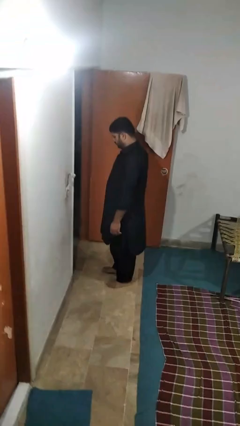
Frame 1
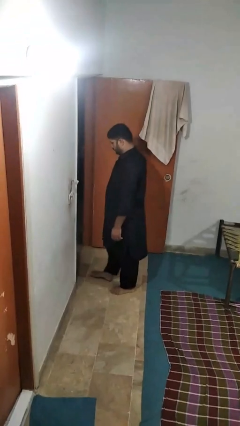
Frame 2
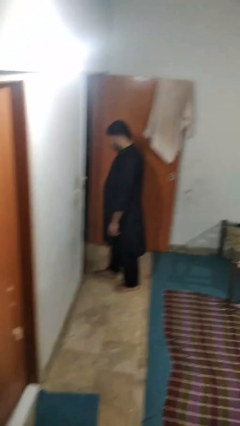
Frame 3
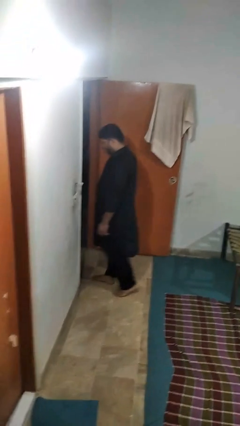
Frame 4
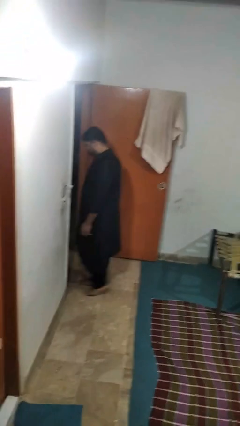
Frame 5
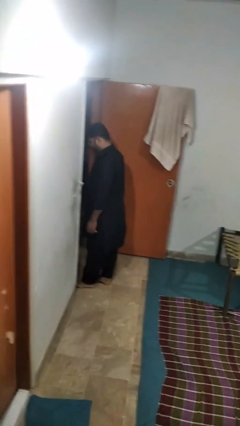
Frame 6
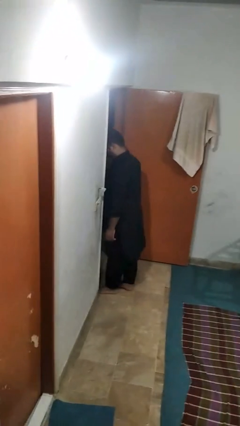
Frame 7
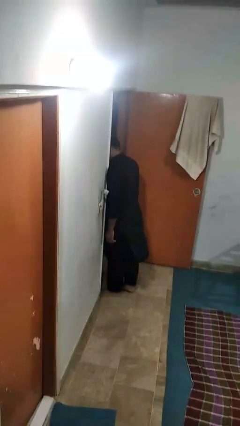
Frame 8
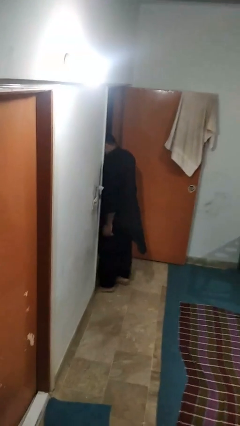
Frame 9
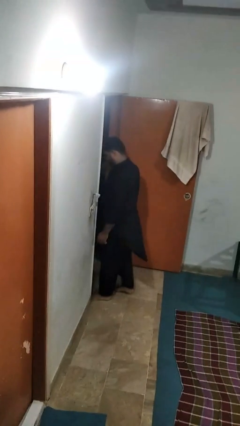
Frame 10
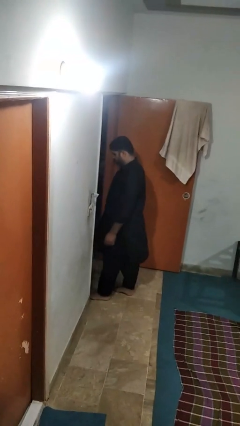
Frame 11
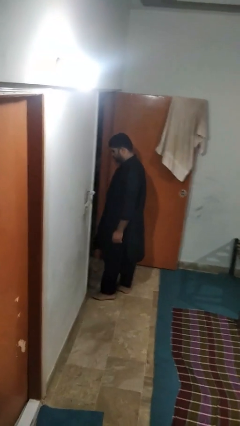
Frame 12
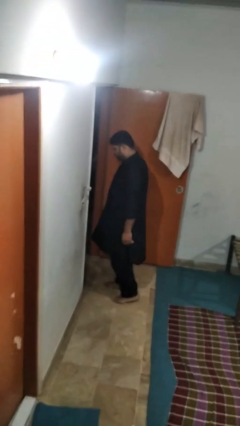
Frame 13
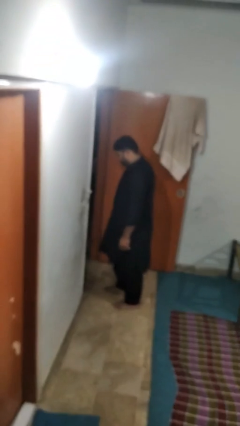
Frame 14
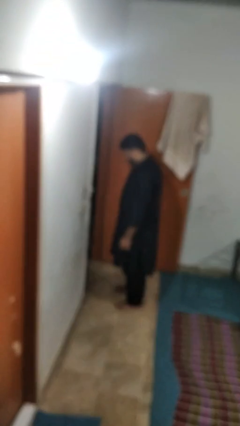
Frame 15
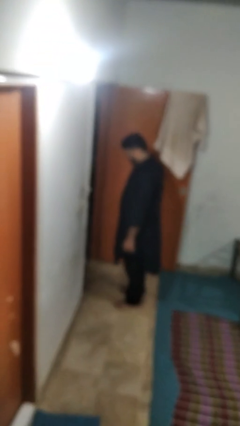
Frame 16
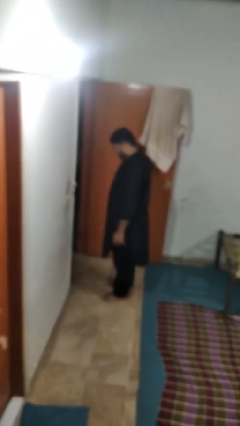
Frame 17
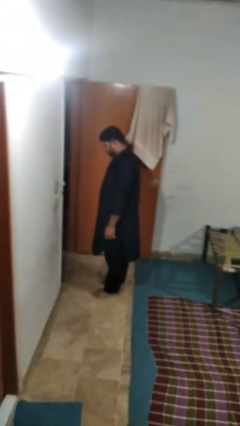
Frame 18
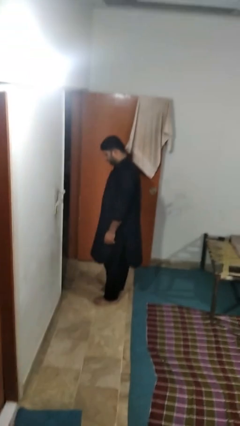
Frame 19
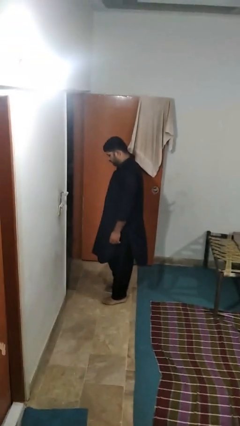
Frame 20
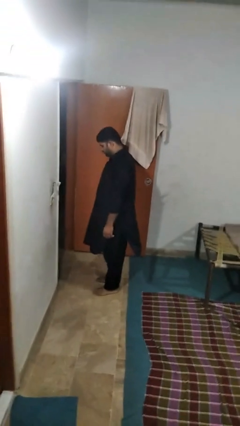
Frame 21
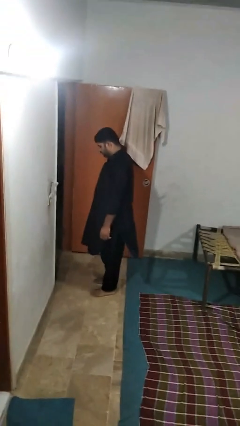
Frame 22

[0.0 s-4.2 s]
person bumps into wall

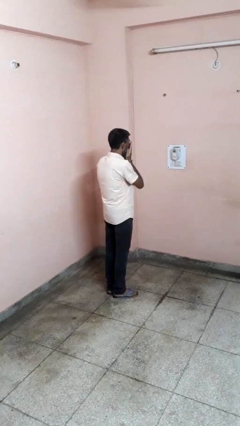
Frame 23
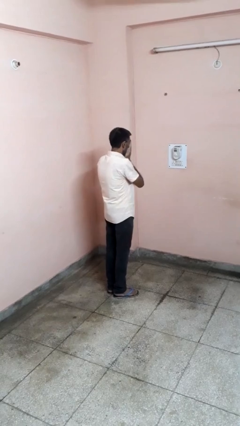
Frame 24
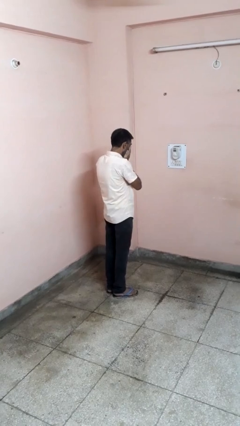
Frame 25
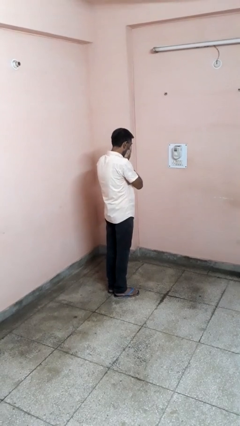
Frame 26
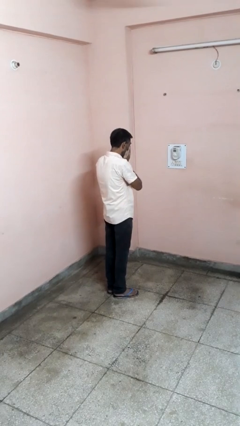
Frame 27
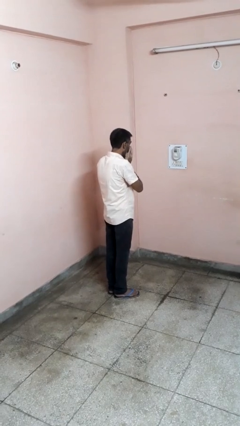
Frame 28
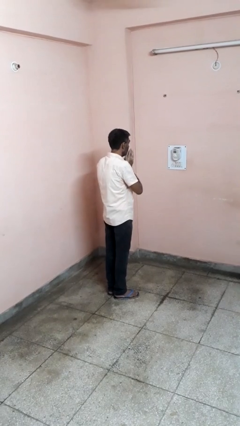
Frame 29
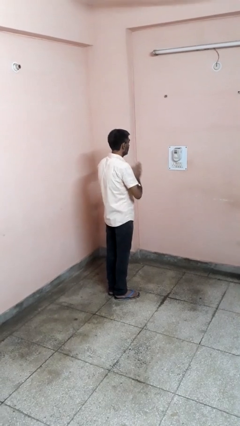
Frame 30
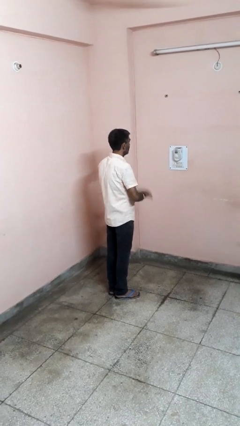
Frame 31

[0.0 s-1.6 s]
person sneezes into hand

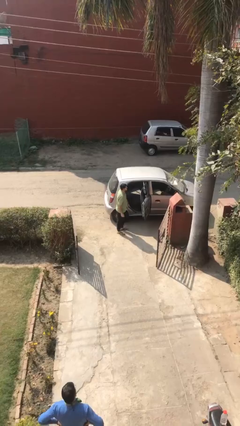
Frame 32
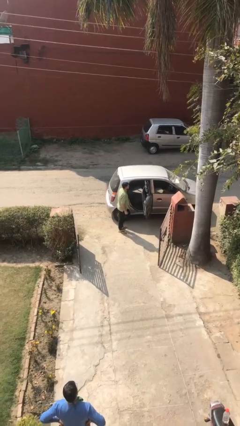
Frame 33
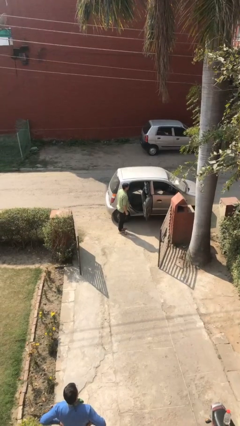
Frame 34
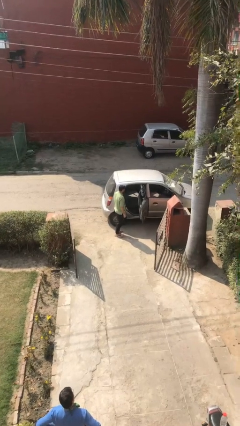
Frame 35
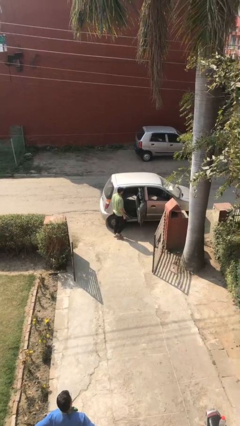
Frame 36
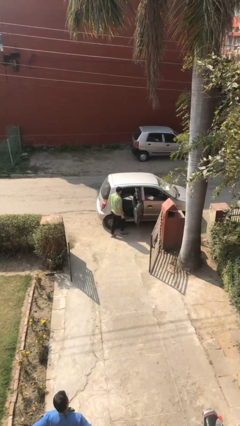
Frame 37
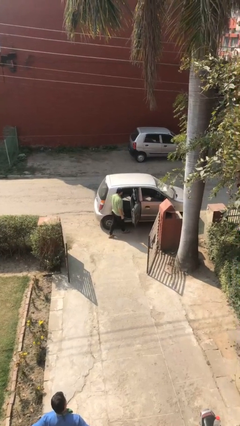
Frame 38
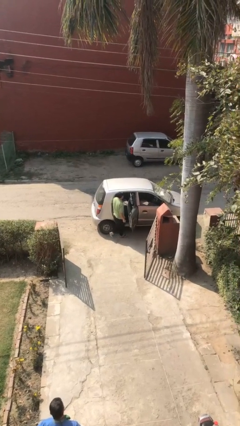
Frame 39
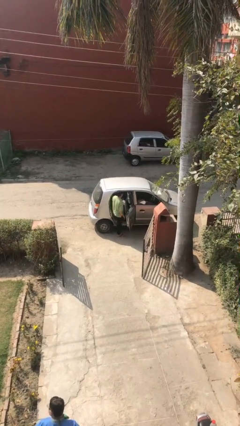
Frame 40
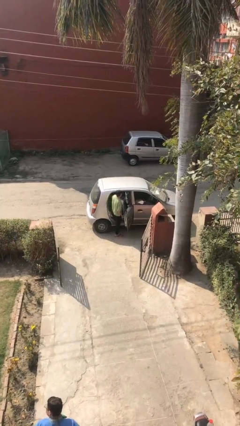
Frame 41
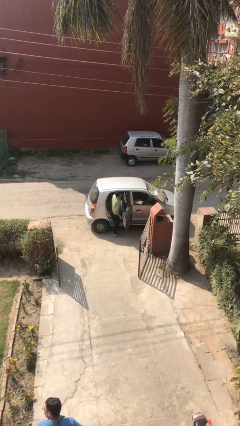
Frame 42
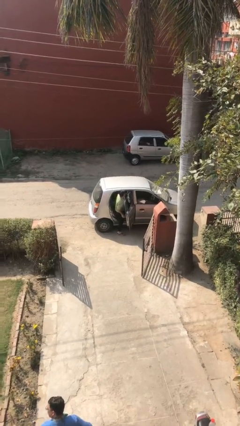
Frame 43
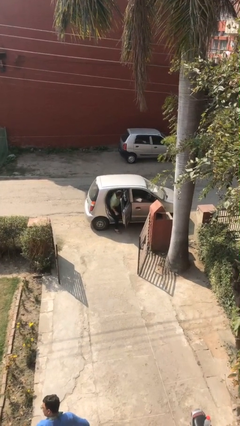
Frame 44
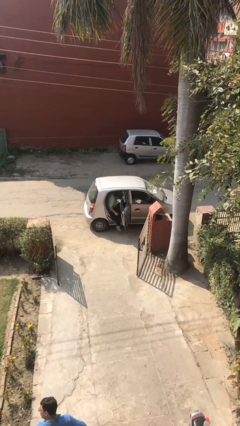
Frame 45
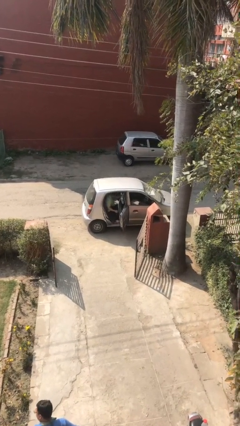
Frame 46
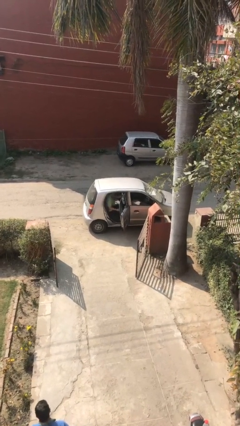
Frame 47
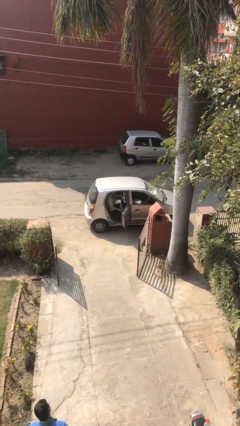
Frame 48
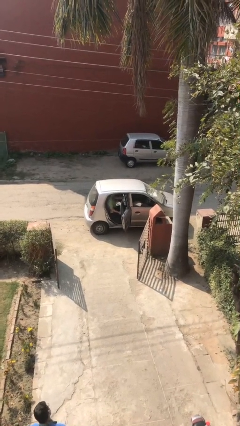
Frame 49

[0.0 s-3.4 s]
person enters car

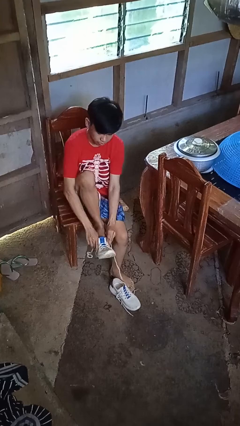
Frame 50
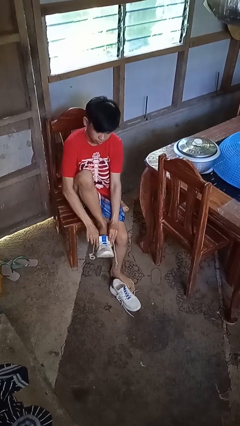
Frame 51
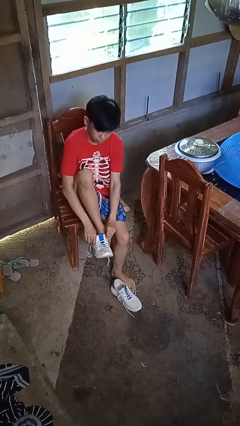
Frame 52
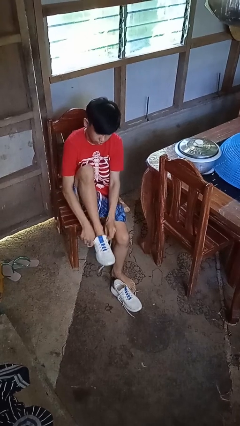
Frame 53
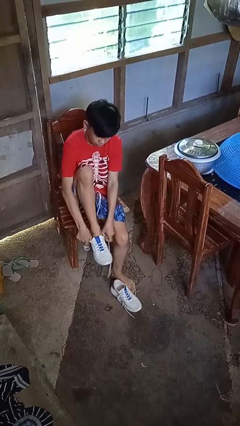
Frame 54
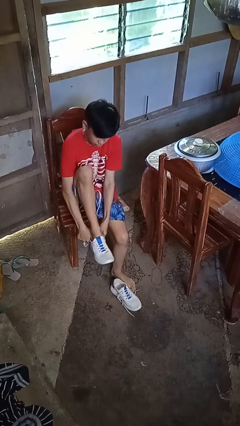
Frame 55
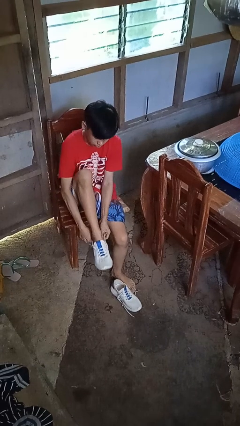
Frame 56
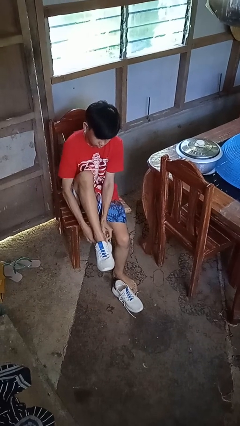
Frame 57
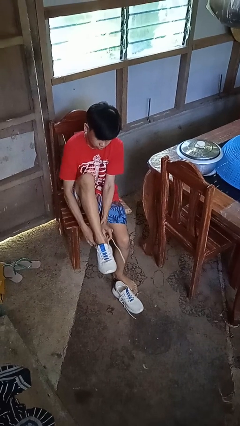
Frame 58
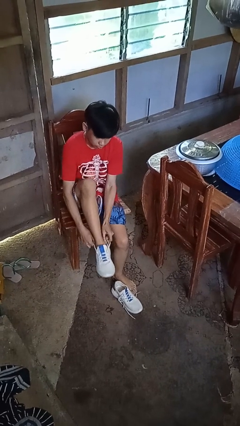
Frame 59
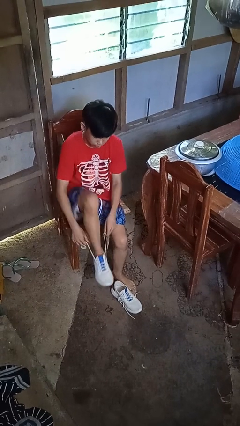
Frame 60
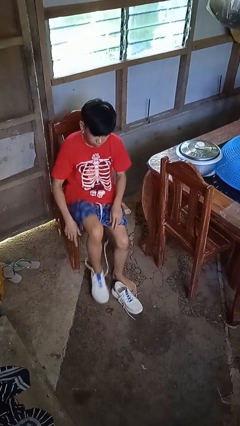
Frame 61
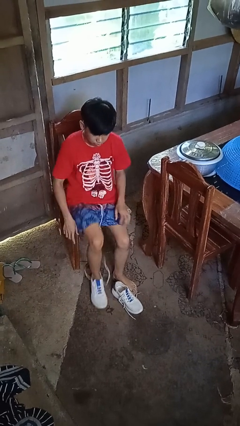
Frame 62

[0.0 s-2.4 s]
person puts on shoes

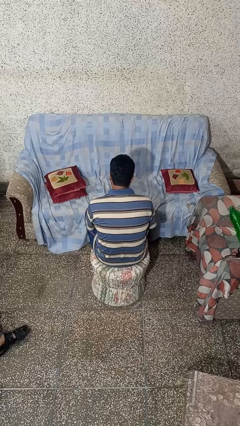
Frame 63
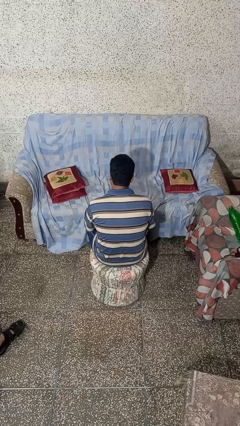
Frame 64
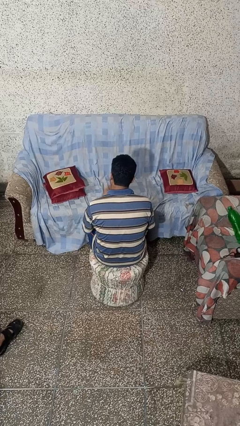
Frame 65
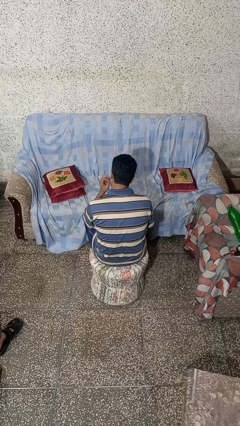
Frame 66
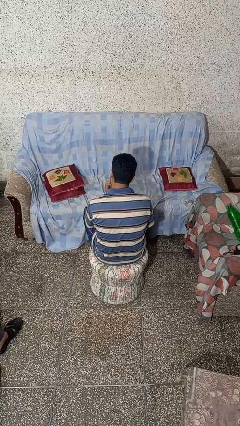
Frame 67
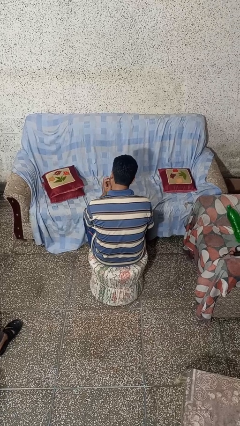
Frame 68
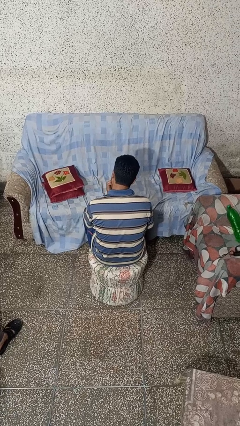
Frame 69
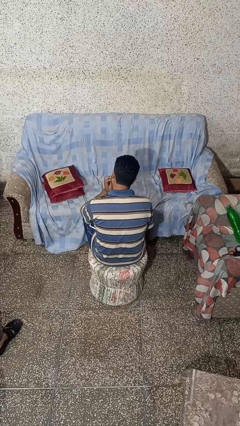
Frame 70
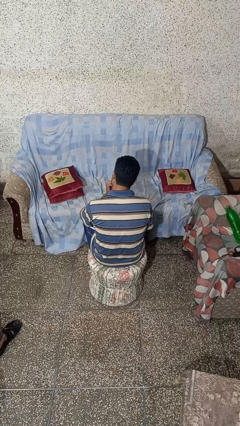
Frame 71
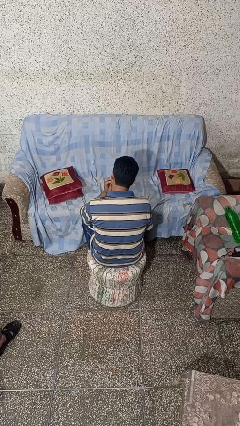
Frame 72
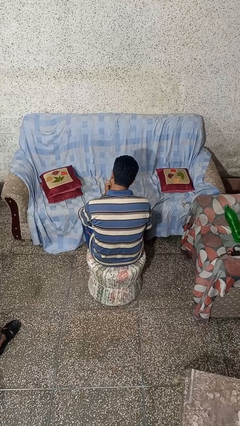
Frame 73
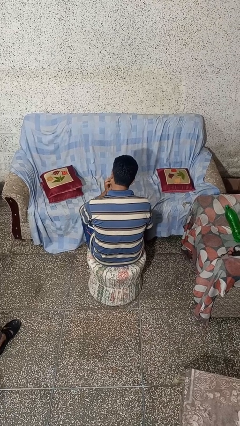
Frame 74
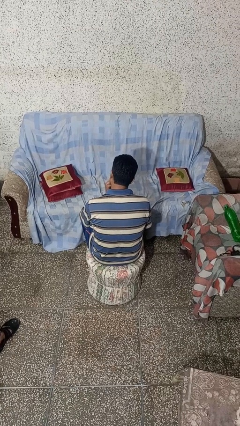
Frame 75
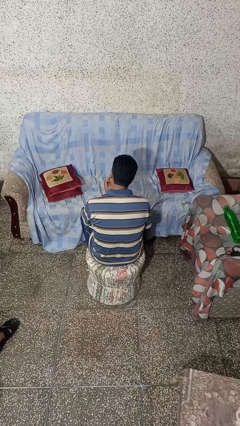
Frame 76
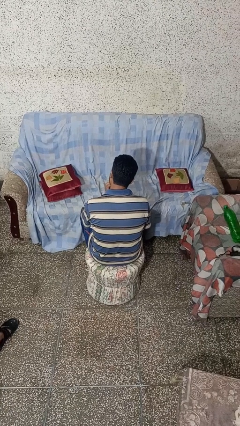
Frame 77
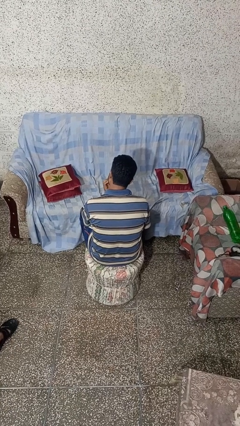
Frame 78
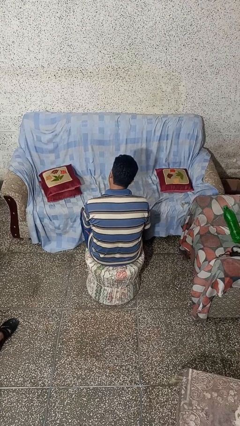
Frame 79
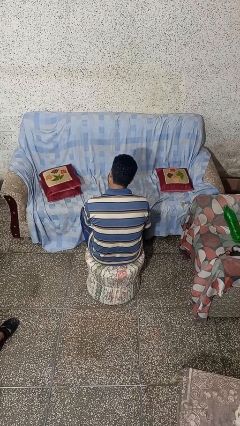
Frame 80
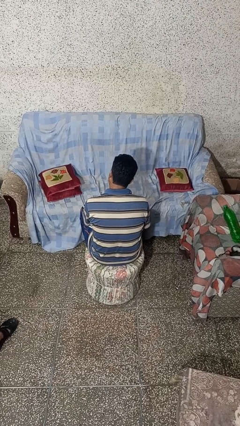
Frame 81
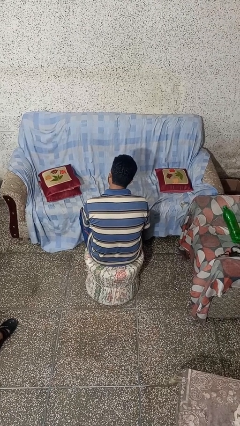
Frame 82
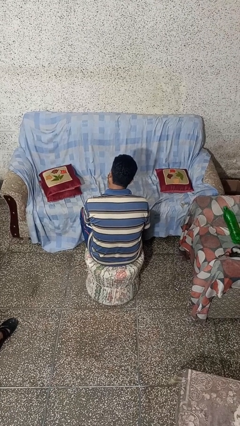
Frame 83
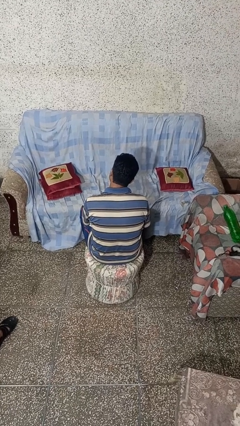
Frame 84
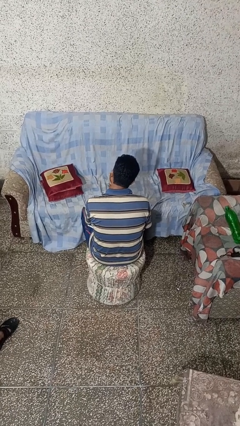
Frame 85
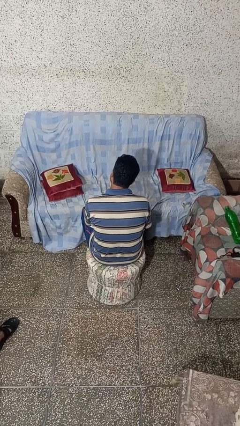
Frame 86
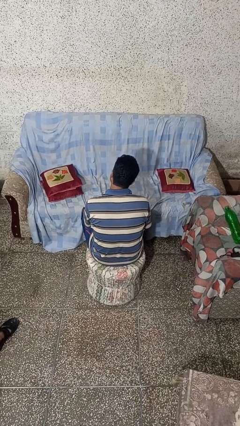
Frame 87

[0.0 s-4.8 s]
person strokes chin

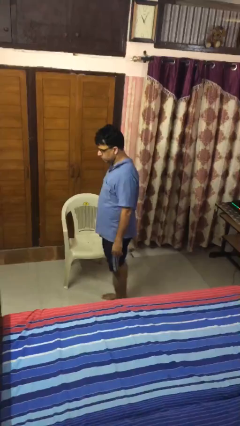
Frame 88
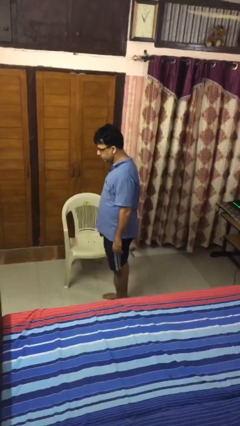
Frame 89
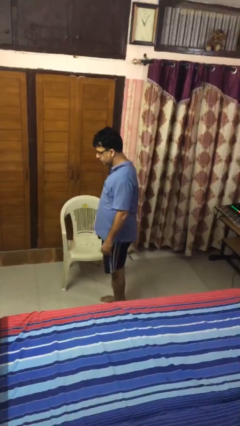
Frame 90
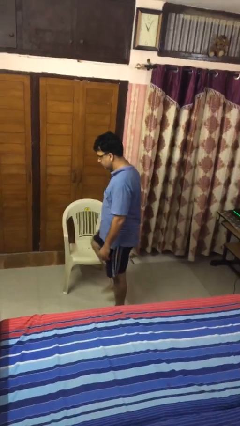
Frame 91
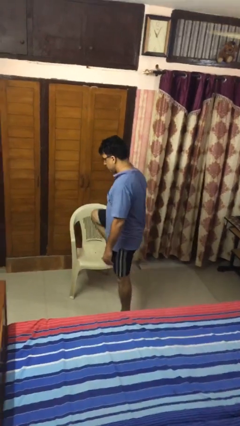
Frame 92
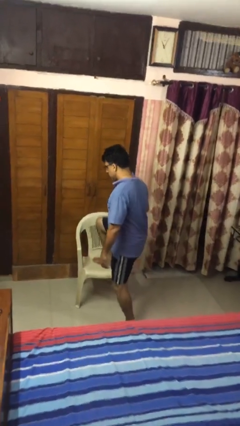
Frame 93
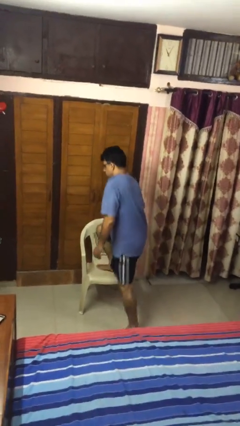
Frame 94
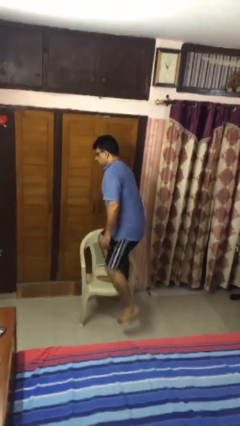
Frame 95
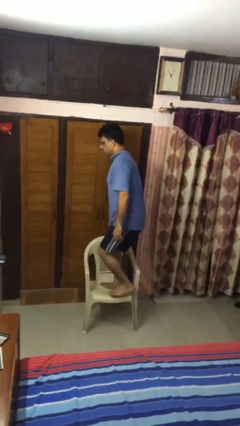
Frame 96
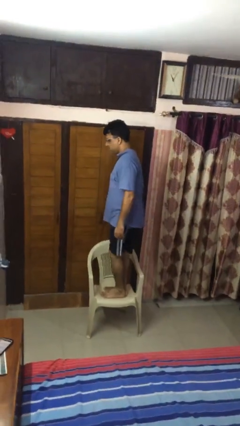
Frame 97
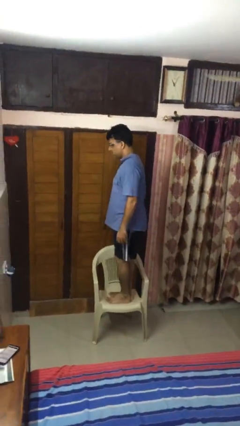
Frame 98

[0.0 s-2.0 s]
person climbs on chair
